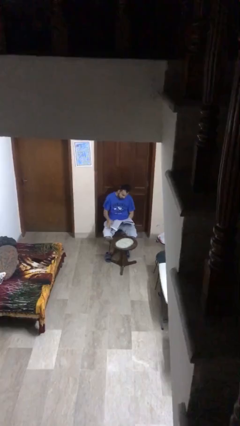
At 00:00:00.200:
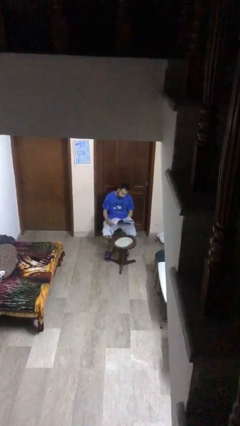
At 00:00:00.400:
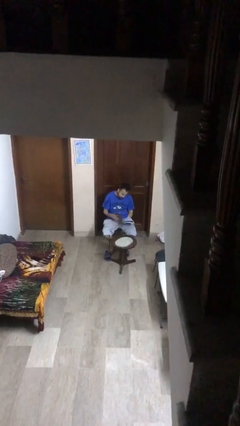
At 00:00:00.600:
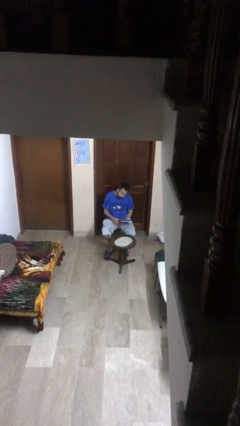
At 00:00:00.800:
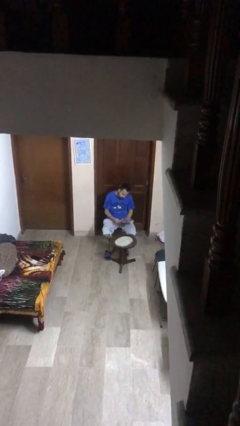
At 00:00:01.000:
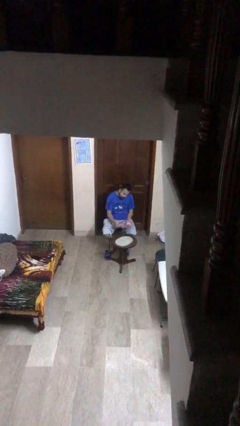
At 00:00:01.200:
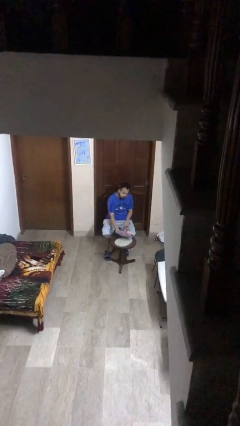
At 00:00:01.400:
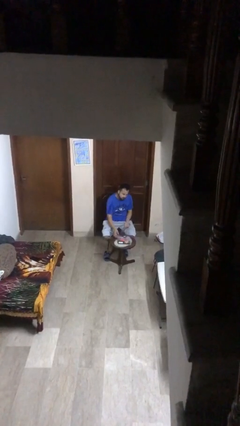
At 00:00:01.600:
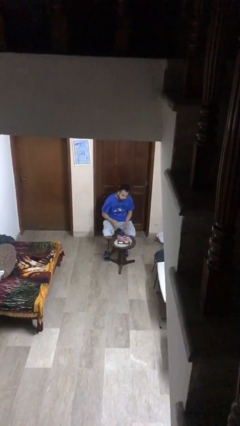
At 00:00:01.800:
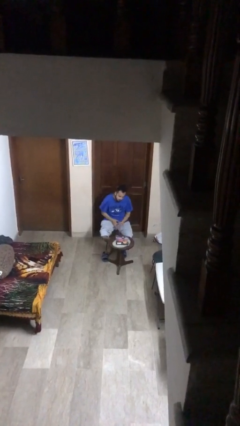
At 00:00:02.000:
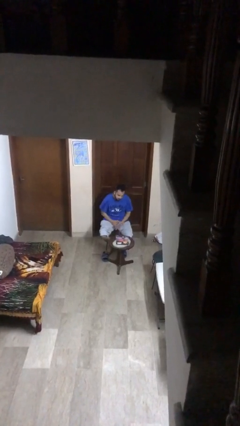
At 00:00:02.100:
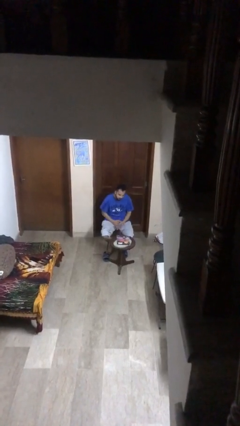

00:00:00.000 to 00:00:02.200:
person puts down object on table

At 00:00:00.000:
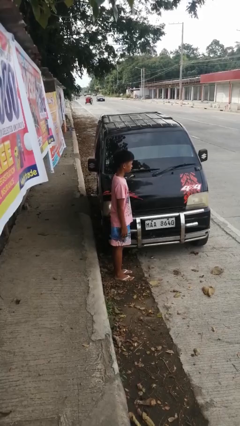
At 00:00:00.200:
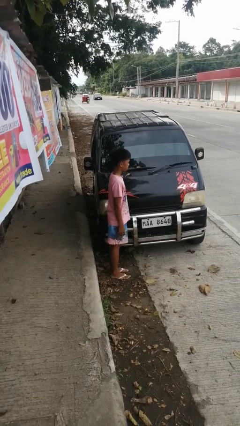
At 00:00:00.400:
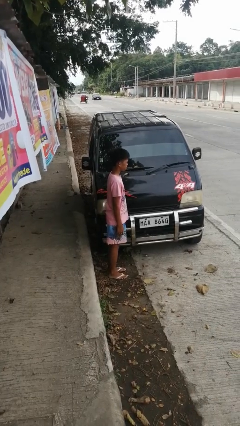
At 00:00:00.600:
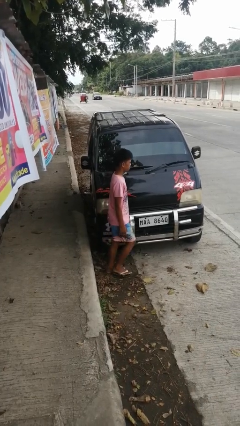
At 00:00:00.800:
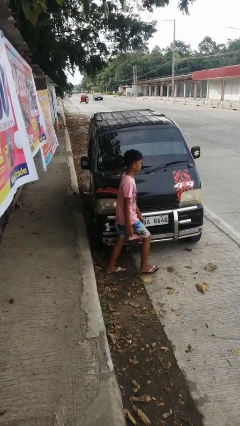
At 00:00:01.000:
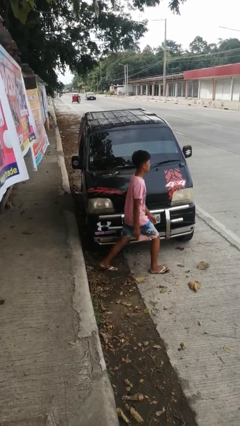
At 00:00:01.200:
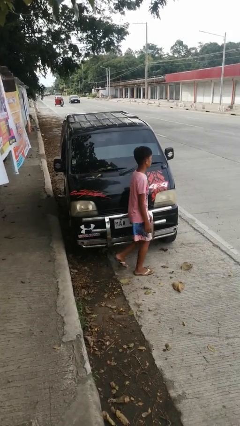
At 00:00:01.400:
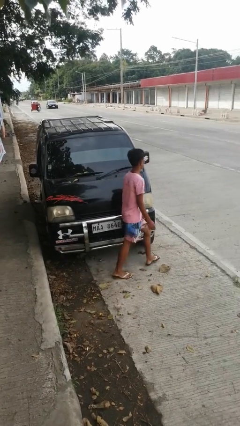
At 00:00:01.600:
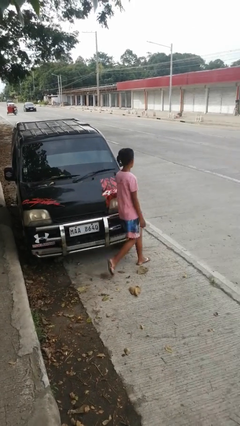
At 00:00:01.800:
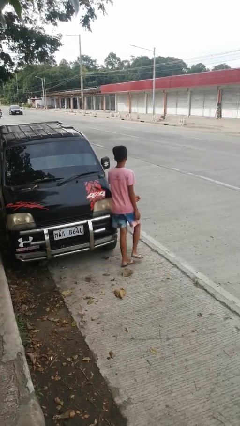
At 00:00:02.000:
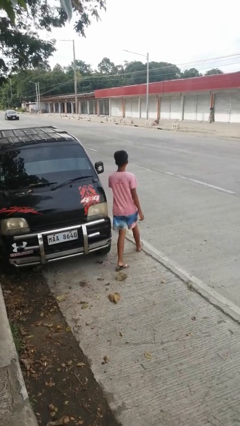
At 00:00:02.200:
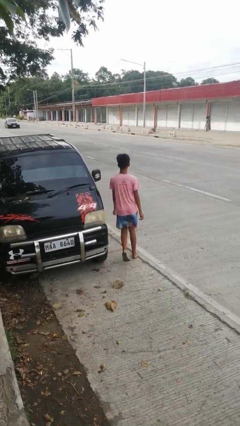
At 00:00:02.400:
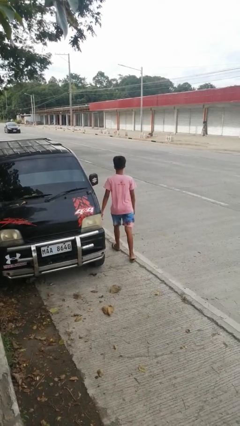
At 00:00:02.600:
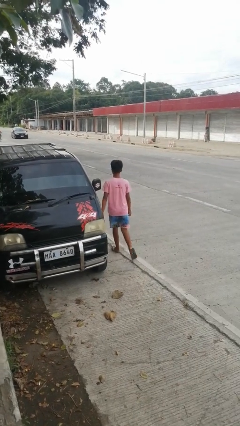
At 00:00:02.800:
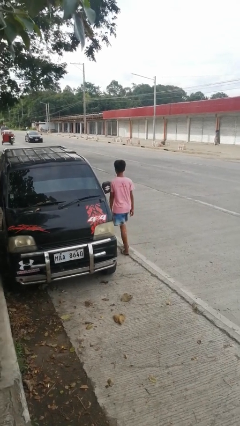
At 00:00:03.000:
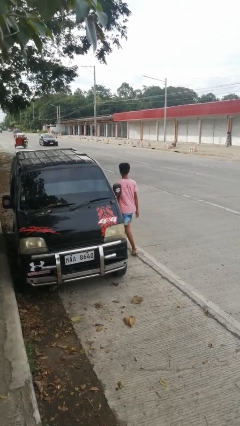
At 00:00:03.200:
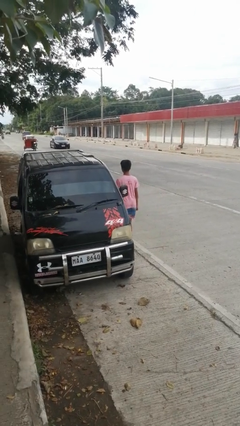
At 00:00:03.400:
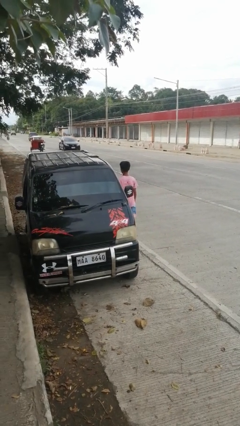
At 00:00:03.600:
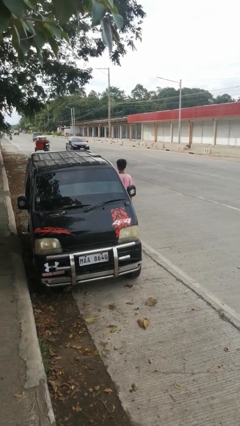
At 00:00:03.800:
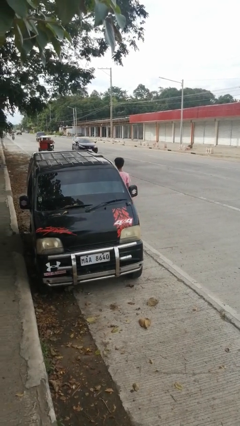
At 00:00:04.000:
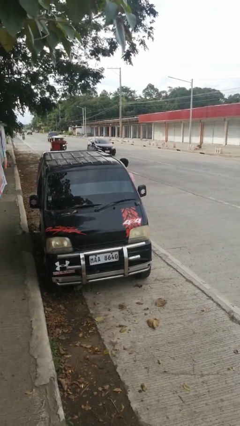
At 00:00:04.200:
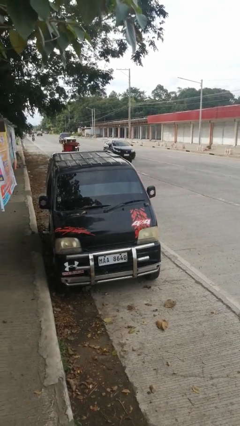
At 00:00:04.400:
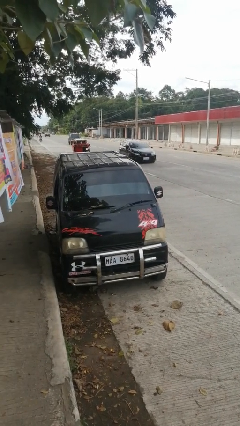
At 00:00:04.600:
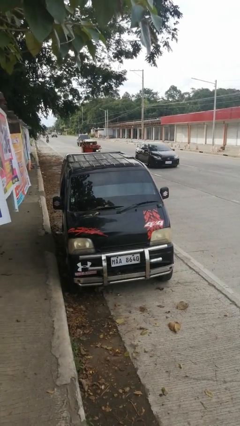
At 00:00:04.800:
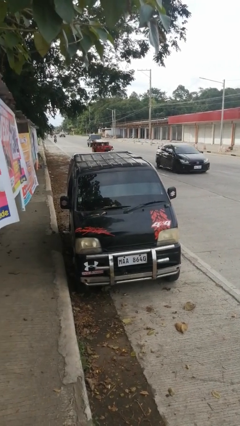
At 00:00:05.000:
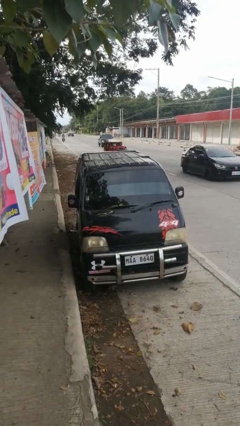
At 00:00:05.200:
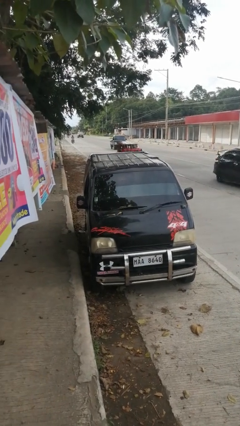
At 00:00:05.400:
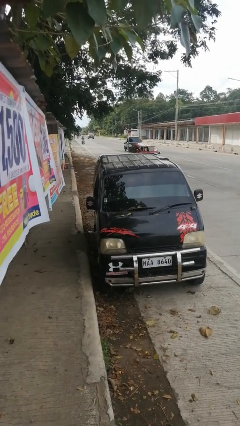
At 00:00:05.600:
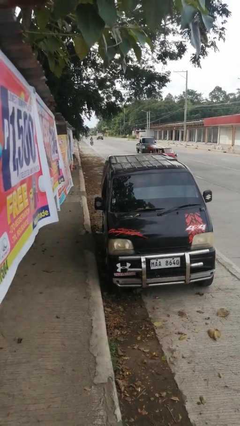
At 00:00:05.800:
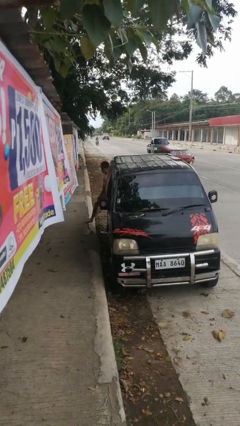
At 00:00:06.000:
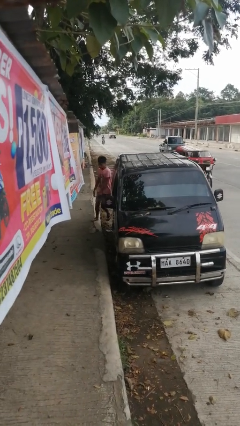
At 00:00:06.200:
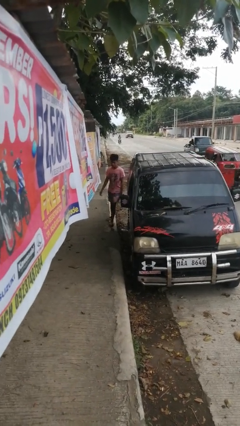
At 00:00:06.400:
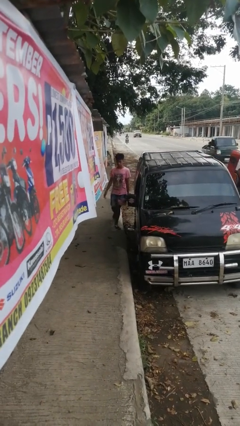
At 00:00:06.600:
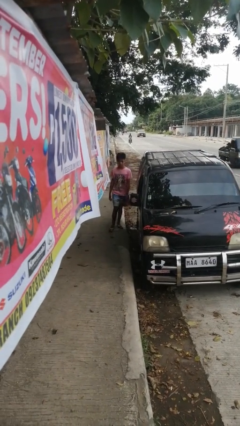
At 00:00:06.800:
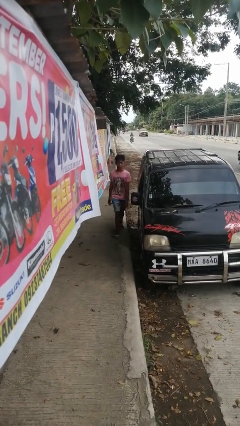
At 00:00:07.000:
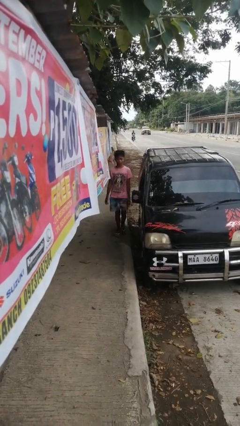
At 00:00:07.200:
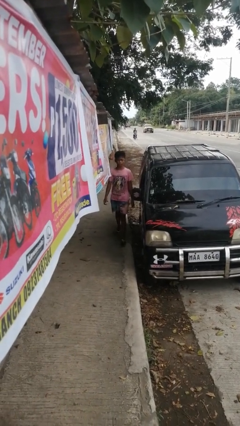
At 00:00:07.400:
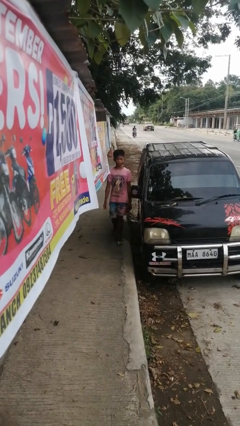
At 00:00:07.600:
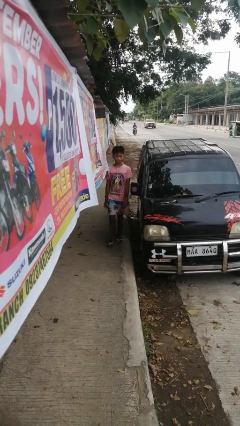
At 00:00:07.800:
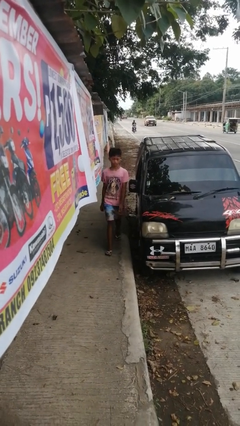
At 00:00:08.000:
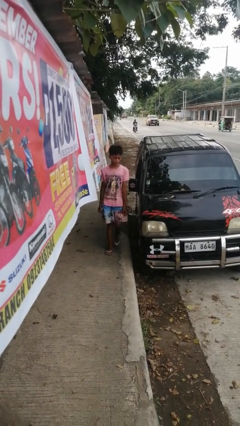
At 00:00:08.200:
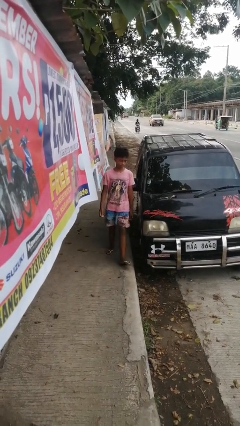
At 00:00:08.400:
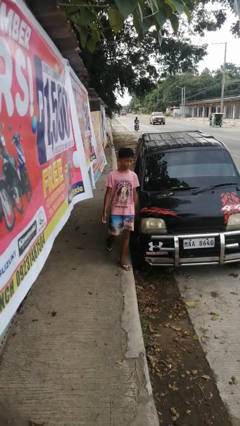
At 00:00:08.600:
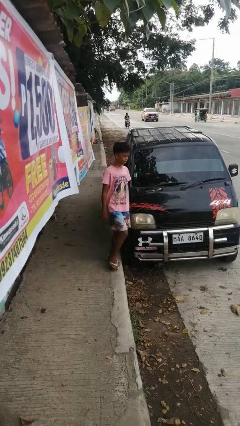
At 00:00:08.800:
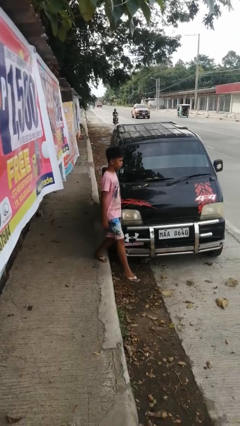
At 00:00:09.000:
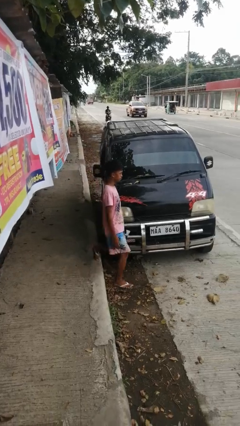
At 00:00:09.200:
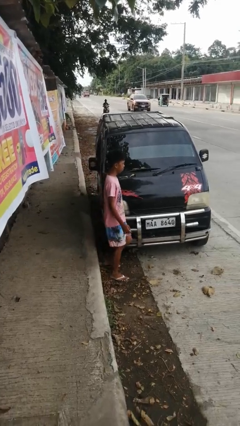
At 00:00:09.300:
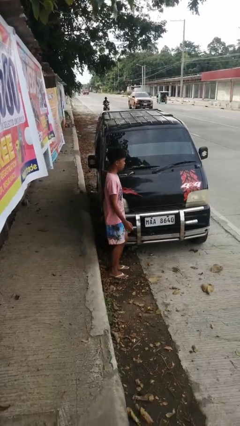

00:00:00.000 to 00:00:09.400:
person walks around car

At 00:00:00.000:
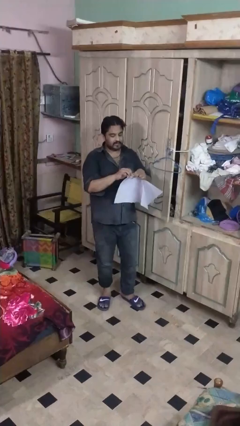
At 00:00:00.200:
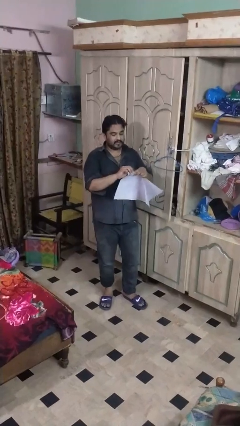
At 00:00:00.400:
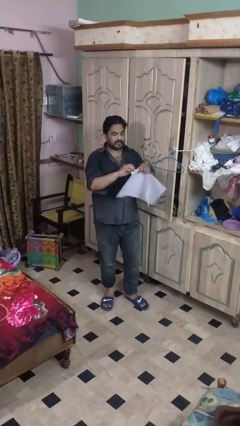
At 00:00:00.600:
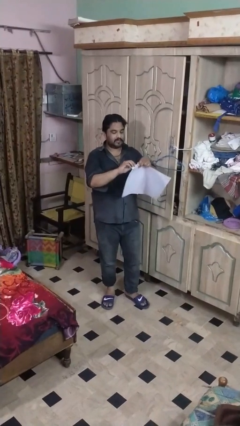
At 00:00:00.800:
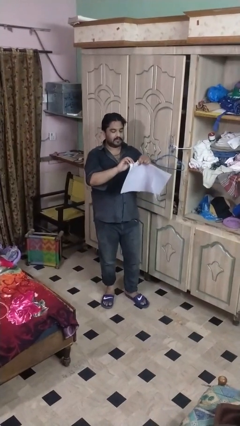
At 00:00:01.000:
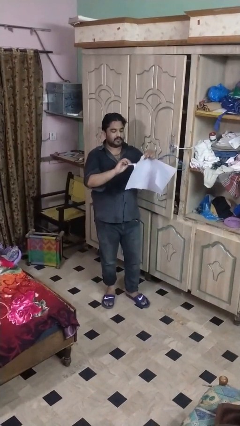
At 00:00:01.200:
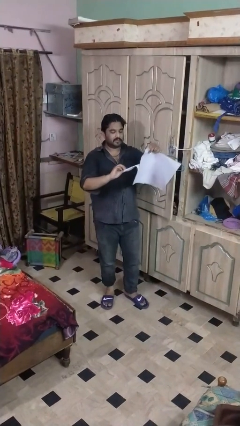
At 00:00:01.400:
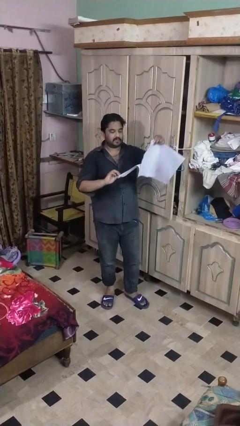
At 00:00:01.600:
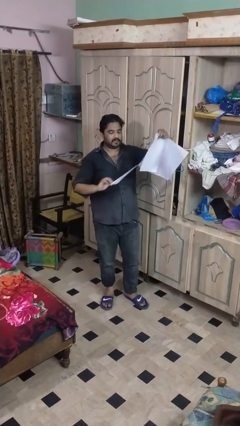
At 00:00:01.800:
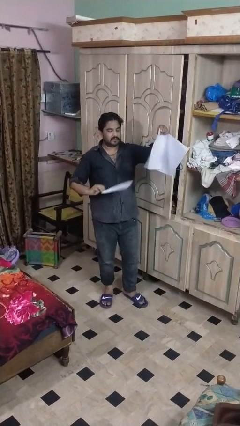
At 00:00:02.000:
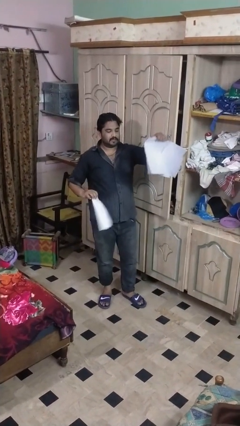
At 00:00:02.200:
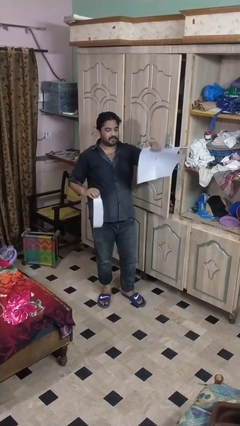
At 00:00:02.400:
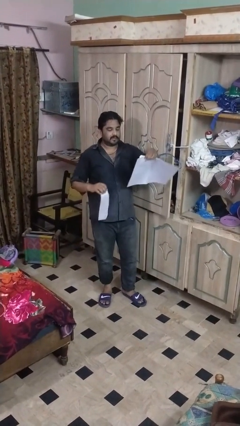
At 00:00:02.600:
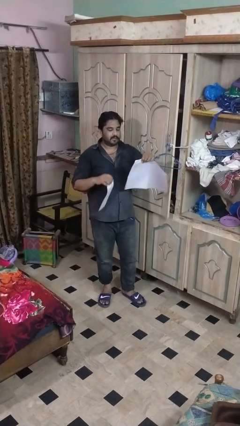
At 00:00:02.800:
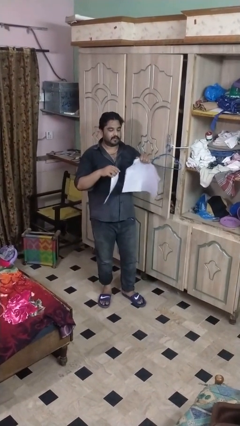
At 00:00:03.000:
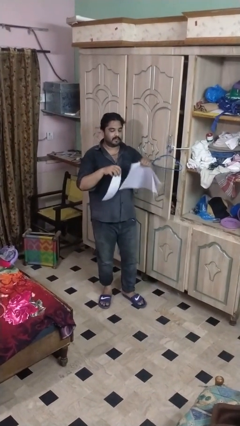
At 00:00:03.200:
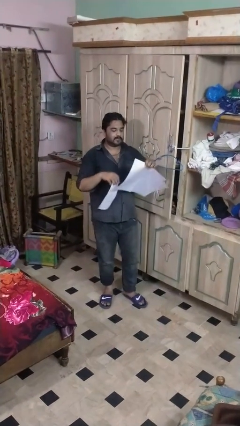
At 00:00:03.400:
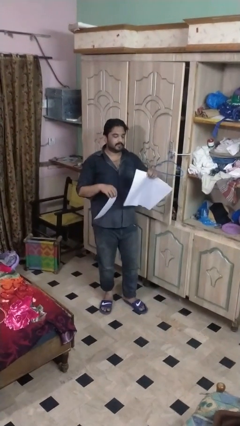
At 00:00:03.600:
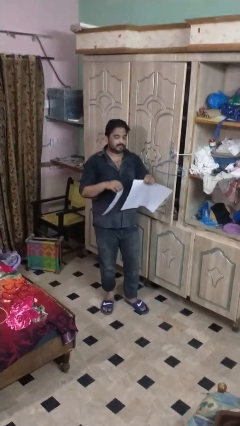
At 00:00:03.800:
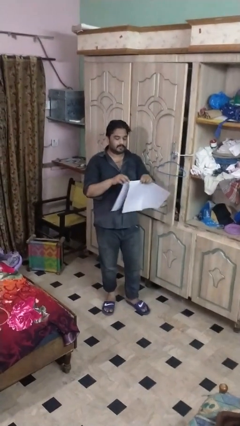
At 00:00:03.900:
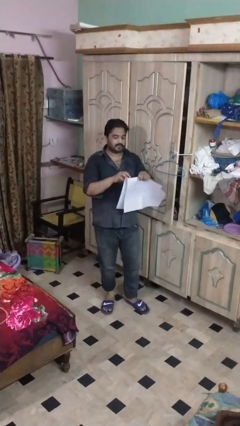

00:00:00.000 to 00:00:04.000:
person tears paper

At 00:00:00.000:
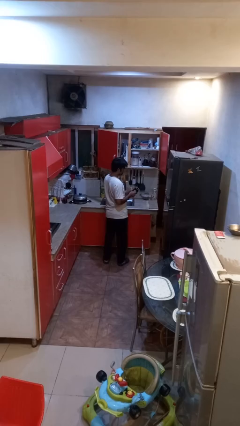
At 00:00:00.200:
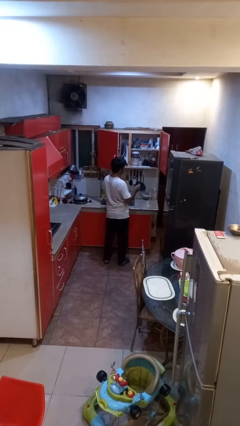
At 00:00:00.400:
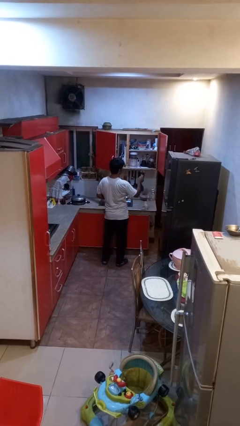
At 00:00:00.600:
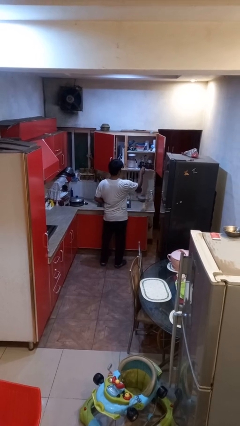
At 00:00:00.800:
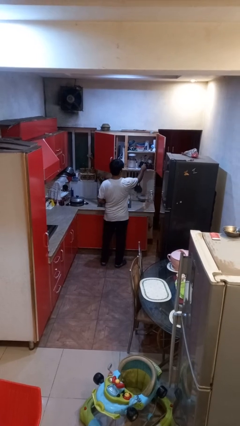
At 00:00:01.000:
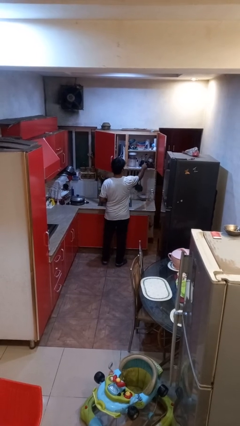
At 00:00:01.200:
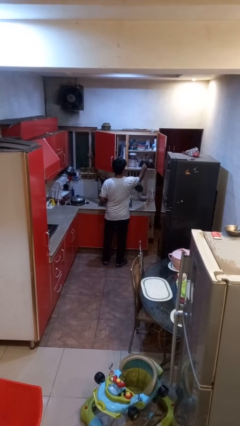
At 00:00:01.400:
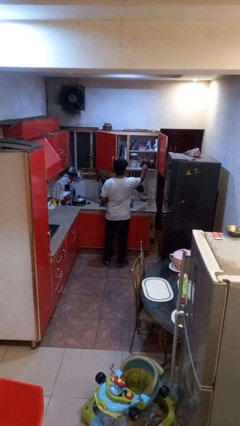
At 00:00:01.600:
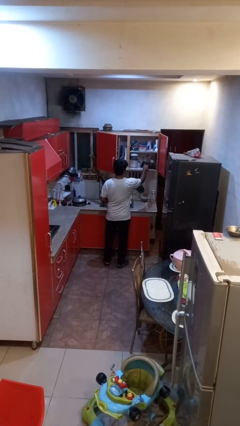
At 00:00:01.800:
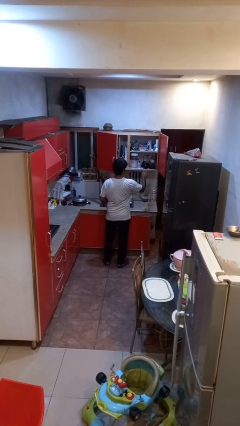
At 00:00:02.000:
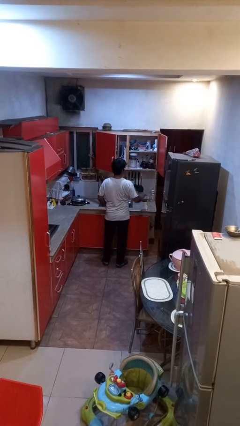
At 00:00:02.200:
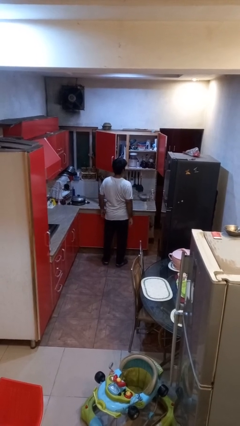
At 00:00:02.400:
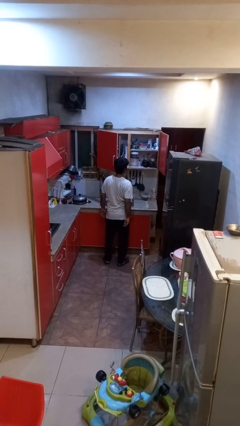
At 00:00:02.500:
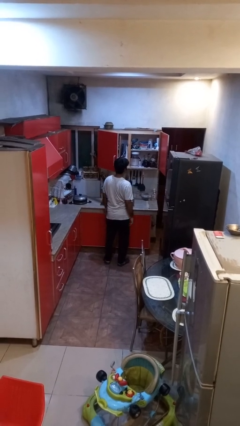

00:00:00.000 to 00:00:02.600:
person puts down object into cabinet
